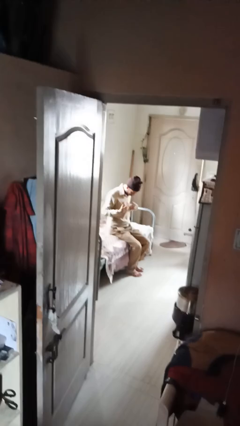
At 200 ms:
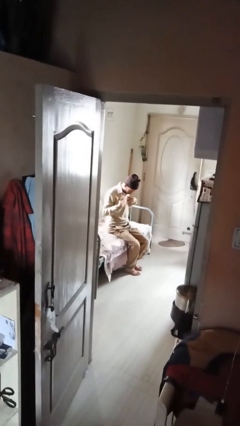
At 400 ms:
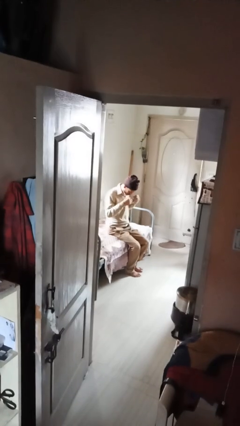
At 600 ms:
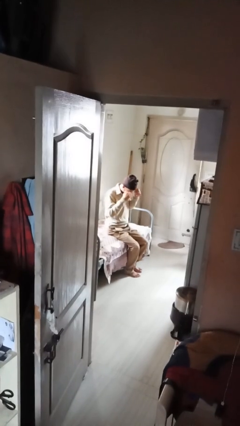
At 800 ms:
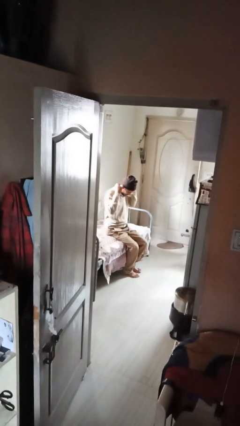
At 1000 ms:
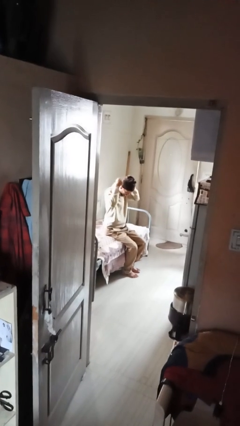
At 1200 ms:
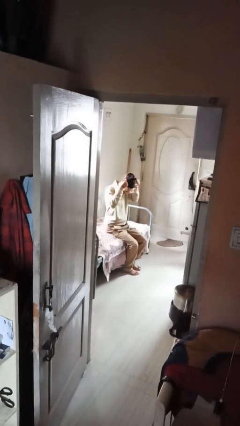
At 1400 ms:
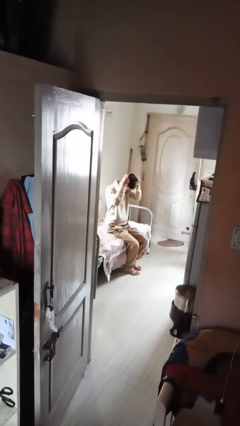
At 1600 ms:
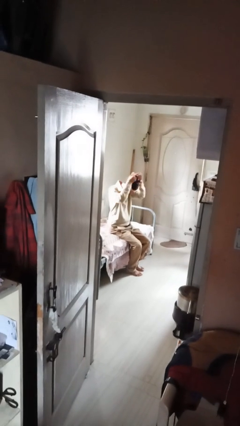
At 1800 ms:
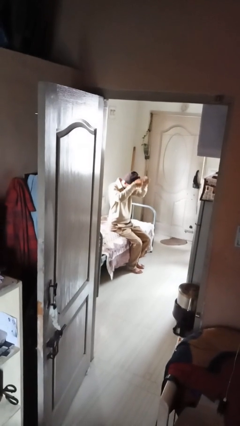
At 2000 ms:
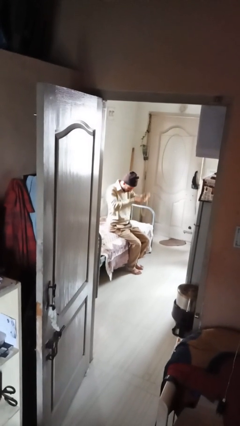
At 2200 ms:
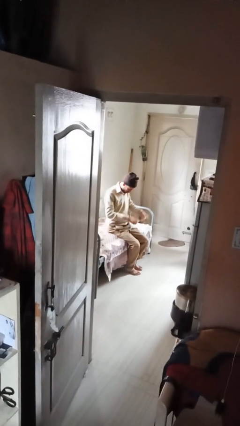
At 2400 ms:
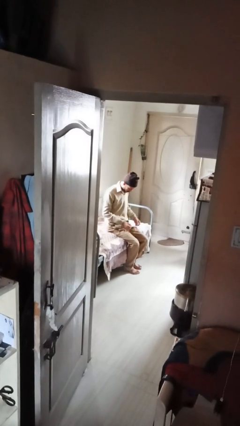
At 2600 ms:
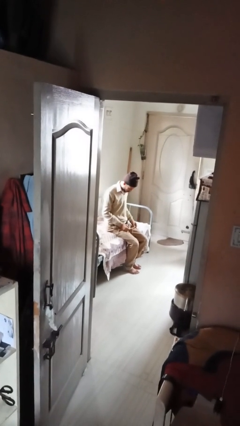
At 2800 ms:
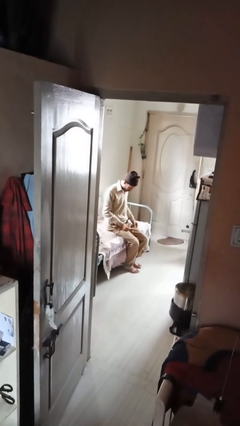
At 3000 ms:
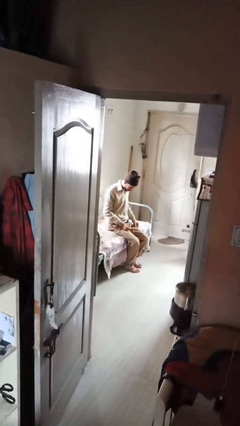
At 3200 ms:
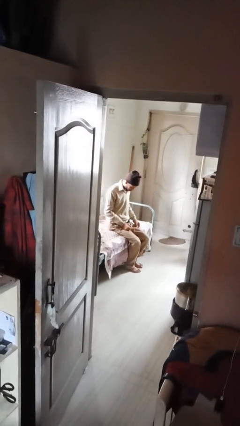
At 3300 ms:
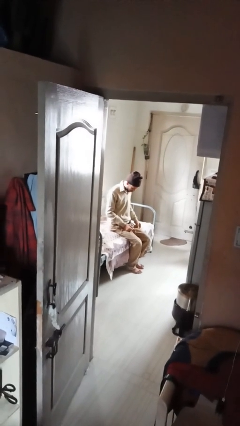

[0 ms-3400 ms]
person takes off necklace

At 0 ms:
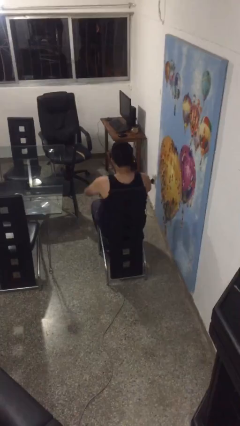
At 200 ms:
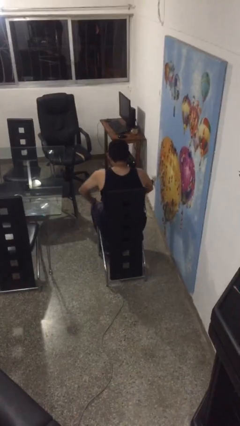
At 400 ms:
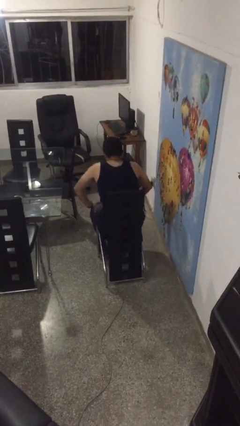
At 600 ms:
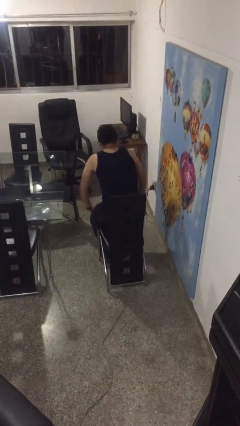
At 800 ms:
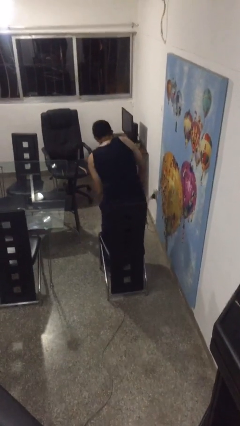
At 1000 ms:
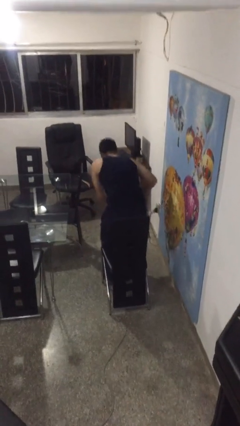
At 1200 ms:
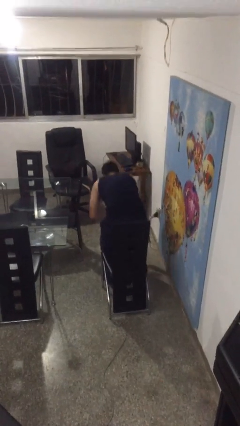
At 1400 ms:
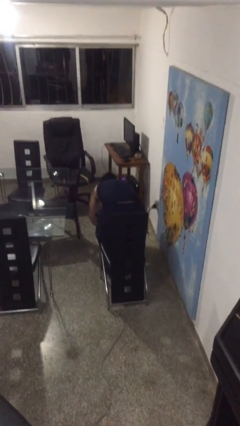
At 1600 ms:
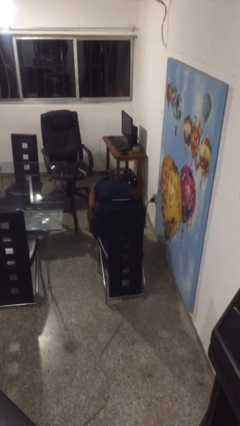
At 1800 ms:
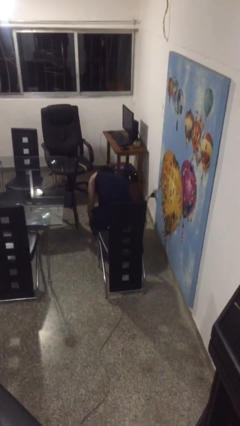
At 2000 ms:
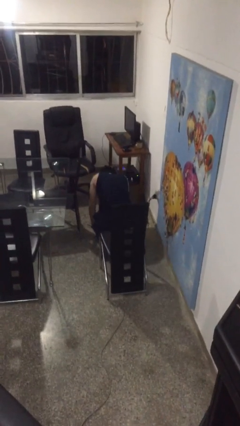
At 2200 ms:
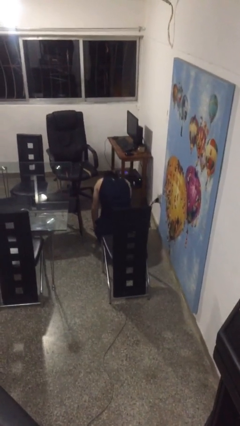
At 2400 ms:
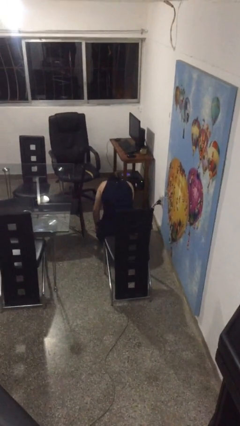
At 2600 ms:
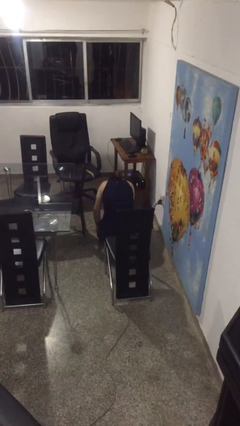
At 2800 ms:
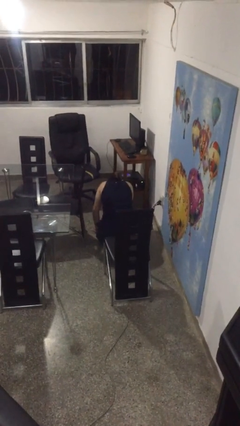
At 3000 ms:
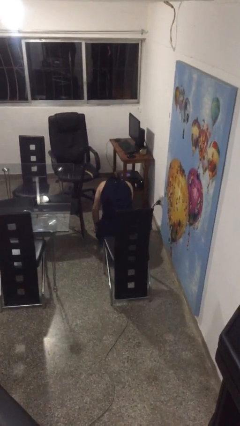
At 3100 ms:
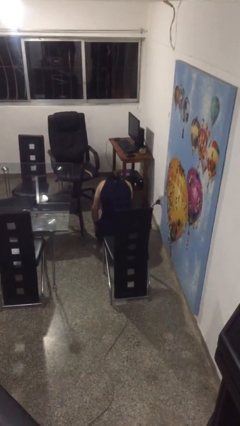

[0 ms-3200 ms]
person falls from chair

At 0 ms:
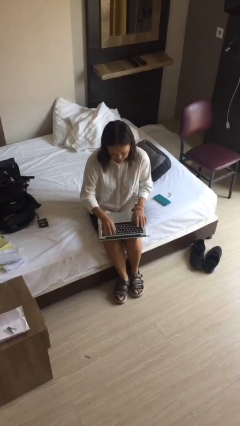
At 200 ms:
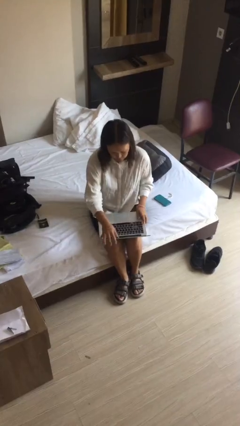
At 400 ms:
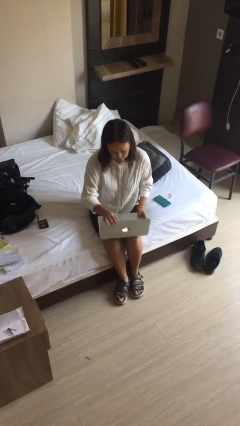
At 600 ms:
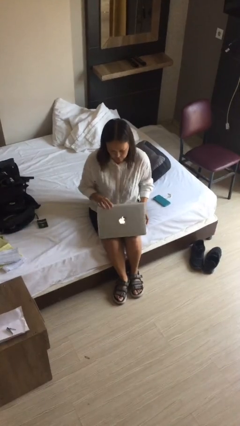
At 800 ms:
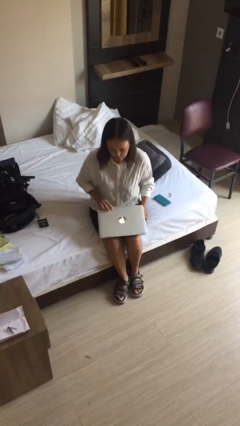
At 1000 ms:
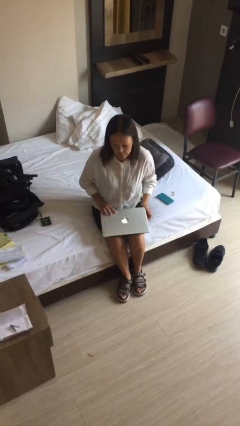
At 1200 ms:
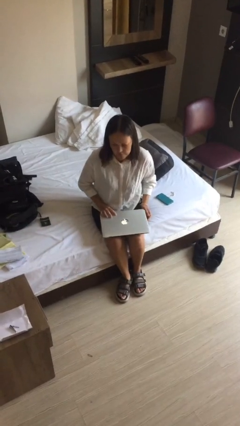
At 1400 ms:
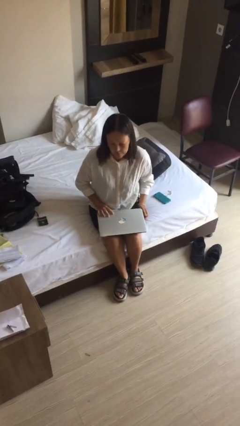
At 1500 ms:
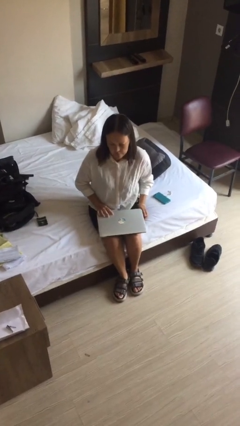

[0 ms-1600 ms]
person closes laptop

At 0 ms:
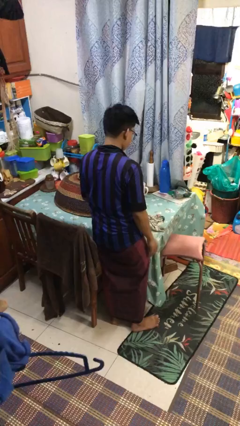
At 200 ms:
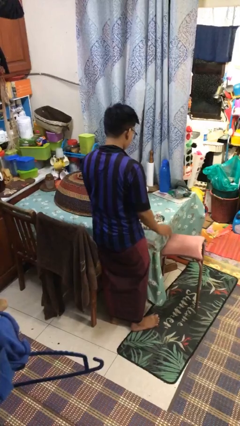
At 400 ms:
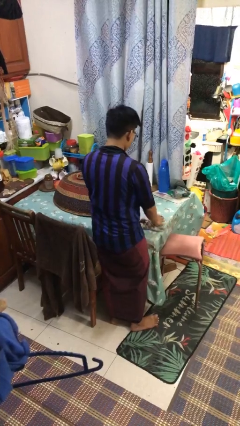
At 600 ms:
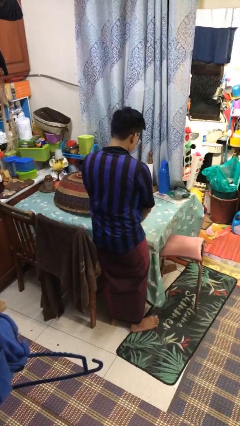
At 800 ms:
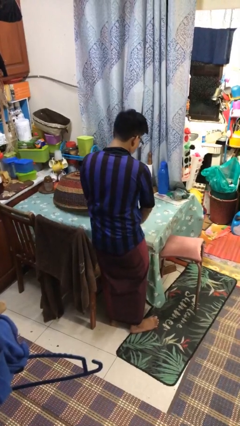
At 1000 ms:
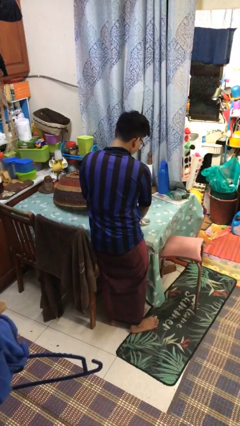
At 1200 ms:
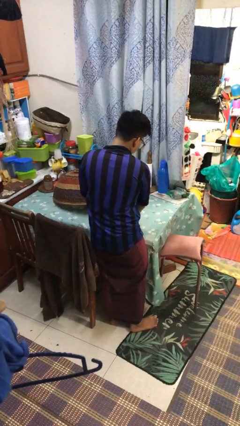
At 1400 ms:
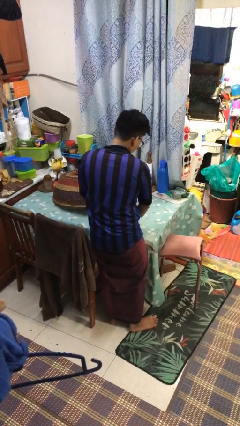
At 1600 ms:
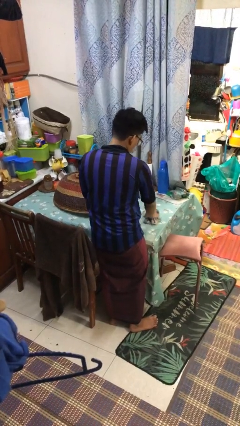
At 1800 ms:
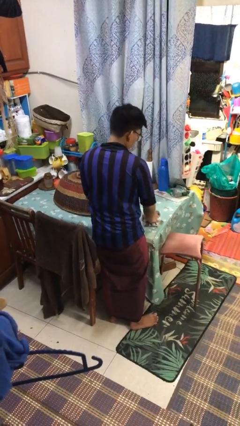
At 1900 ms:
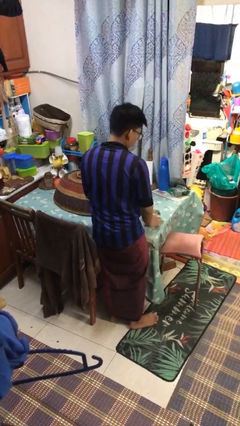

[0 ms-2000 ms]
person cleans table with rag

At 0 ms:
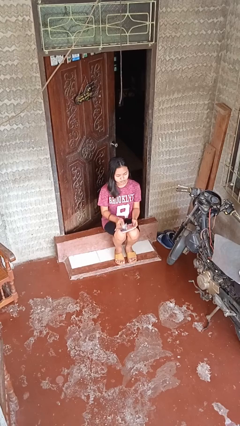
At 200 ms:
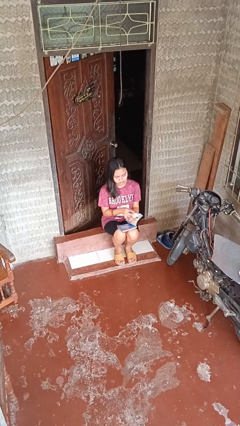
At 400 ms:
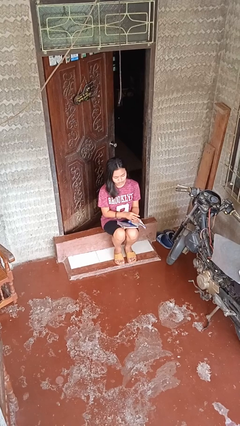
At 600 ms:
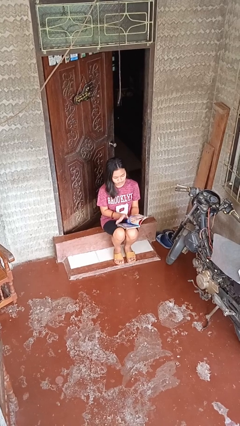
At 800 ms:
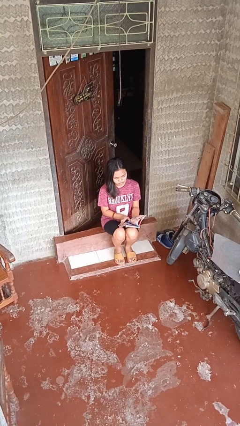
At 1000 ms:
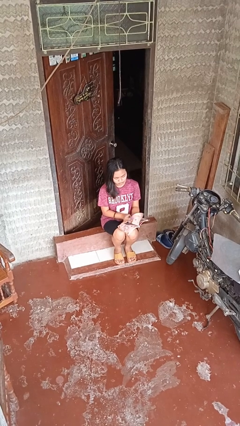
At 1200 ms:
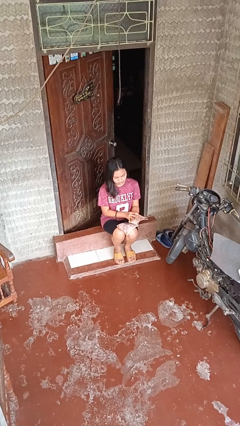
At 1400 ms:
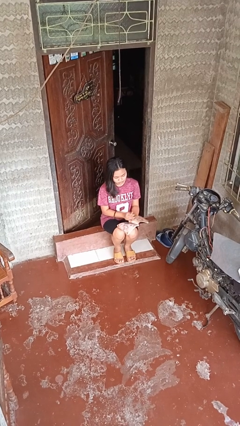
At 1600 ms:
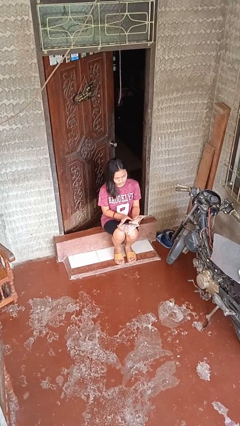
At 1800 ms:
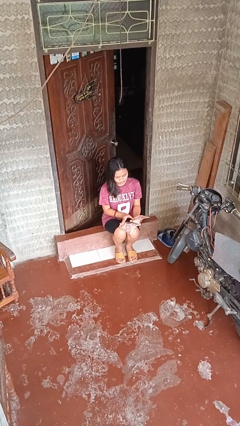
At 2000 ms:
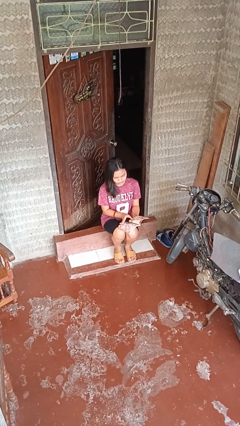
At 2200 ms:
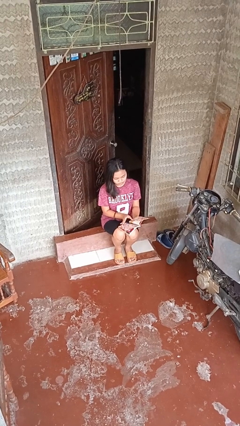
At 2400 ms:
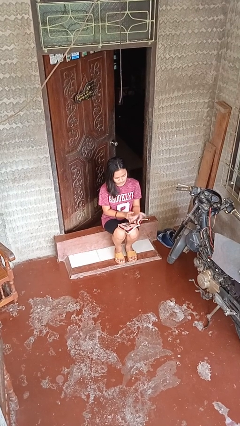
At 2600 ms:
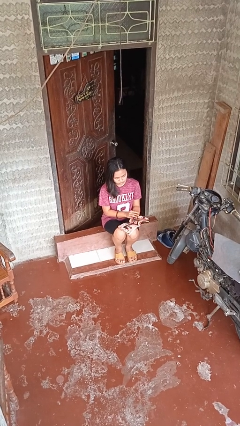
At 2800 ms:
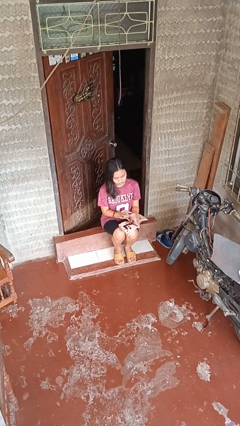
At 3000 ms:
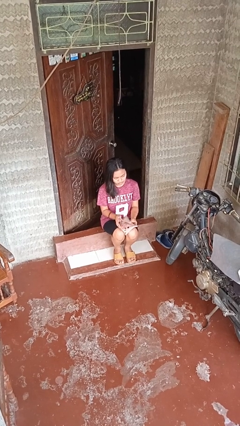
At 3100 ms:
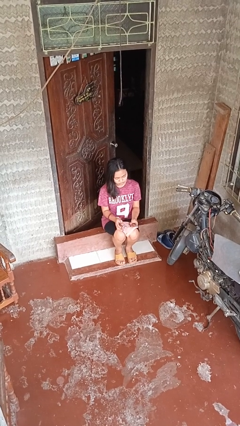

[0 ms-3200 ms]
person reads magazine

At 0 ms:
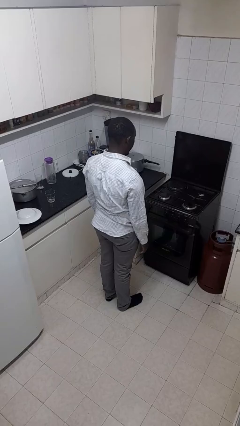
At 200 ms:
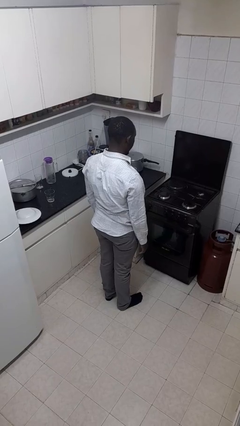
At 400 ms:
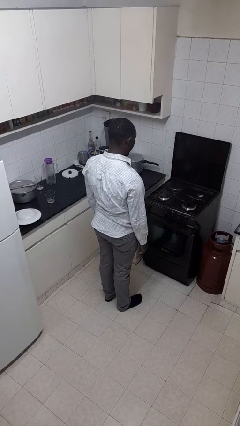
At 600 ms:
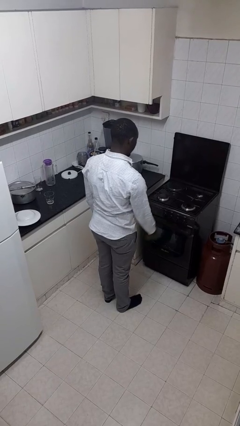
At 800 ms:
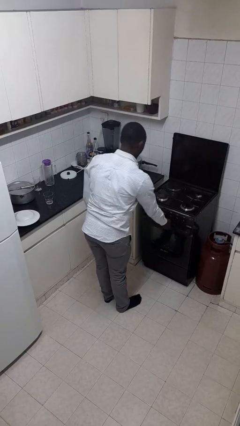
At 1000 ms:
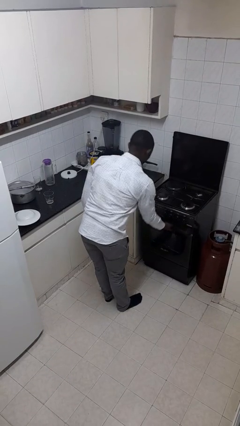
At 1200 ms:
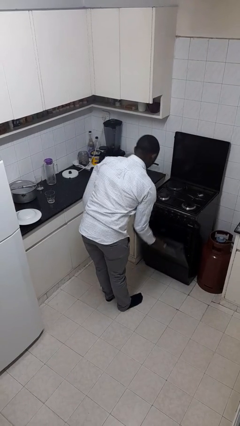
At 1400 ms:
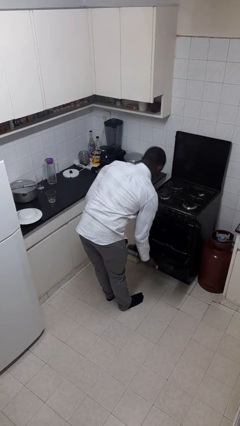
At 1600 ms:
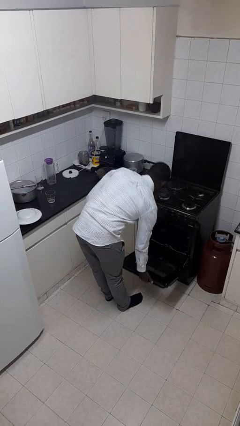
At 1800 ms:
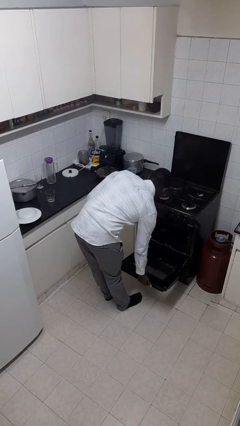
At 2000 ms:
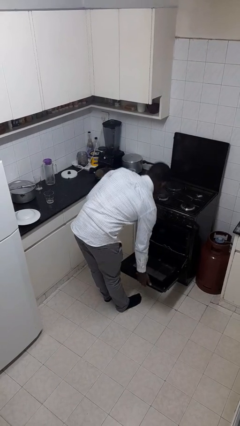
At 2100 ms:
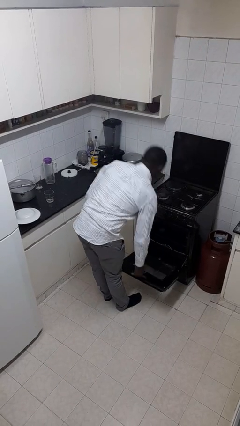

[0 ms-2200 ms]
person opens oven door

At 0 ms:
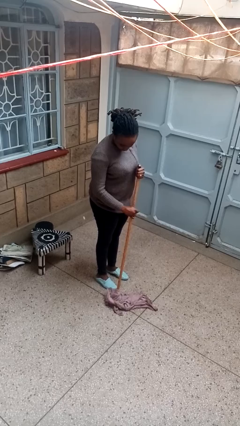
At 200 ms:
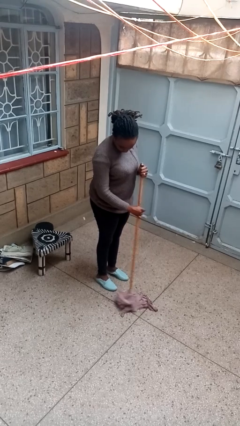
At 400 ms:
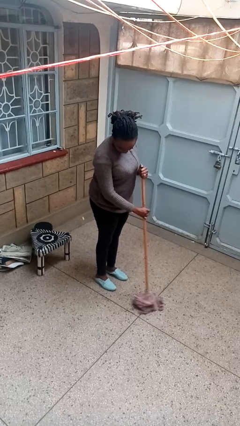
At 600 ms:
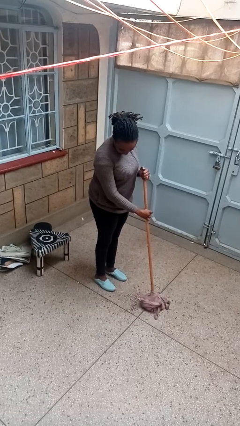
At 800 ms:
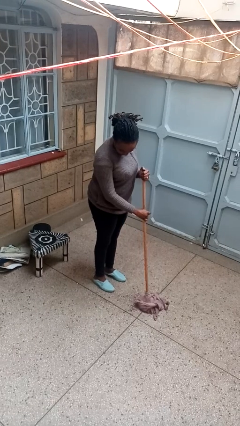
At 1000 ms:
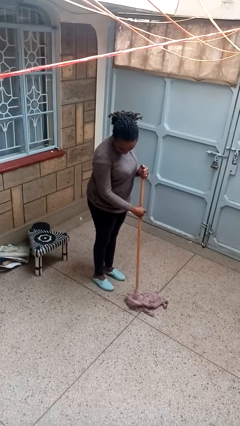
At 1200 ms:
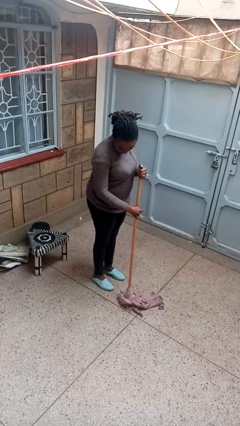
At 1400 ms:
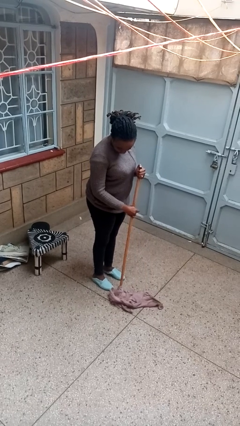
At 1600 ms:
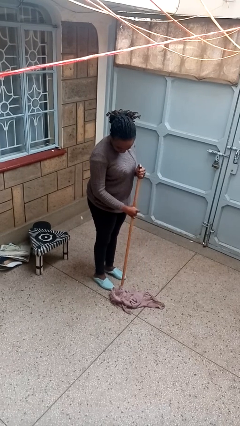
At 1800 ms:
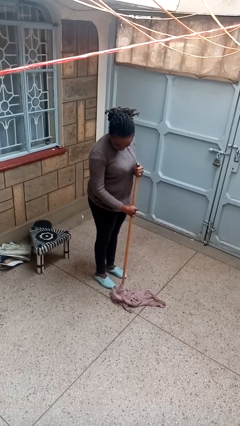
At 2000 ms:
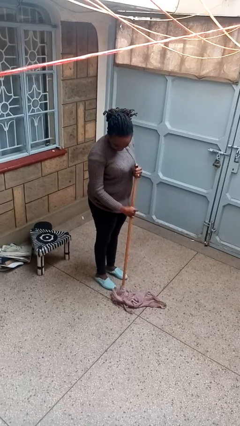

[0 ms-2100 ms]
person mops
